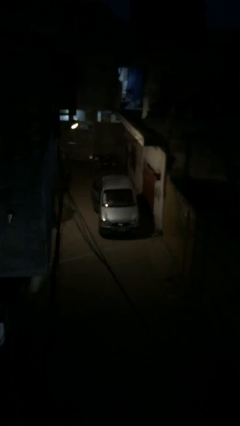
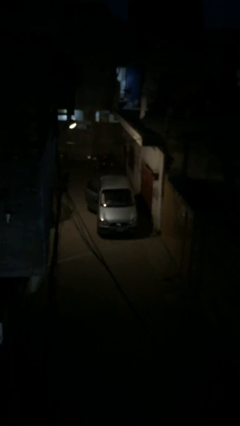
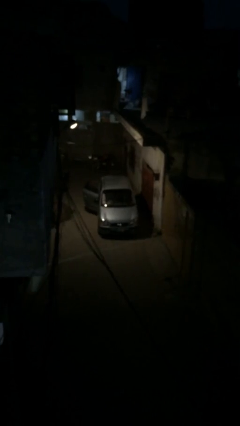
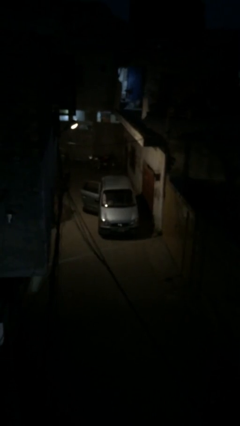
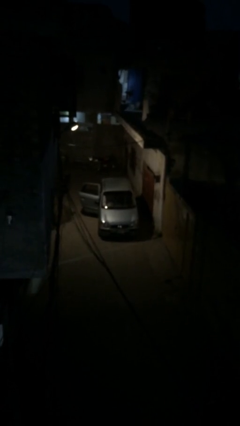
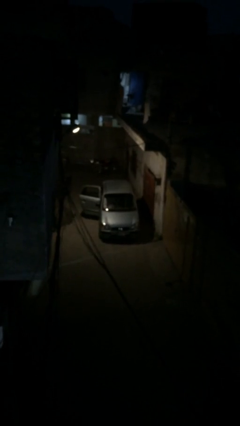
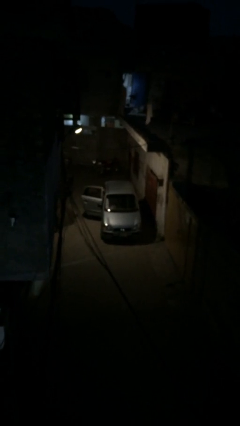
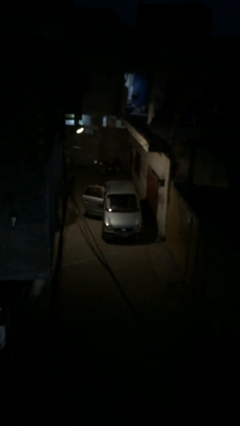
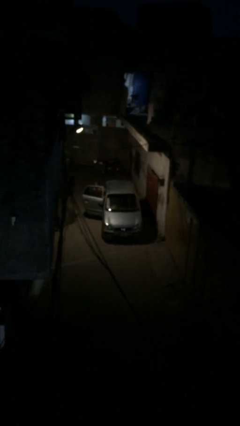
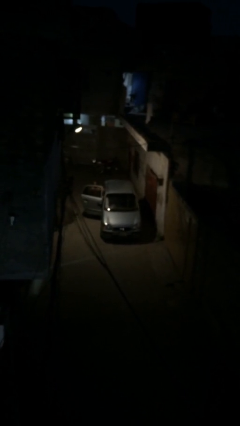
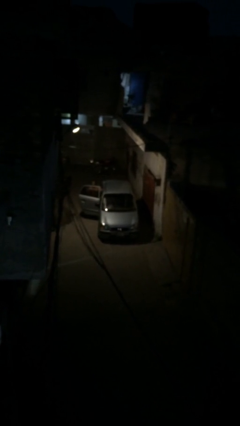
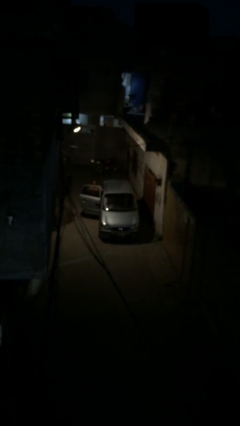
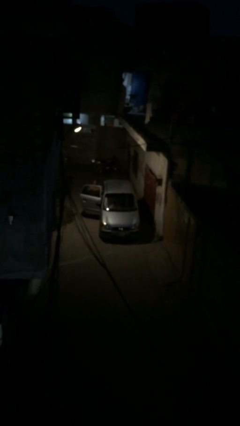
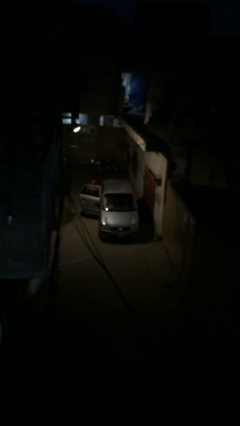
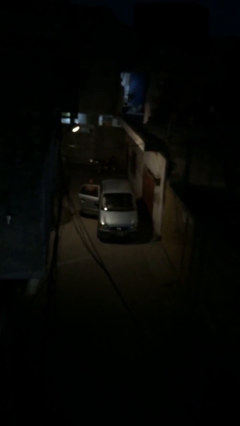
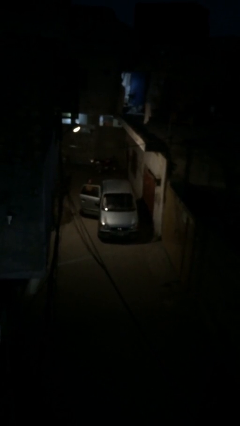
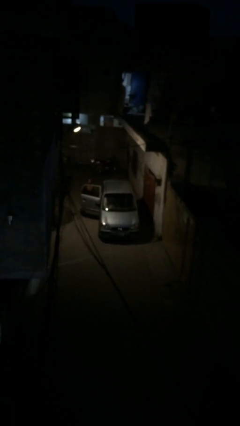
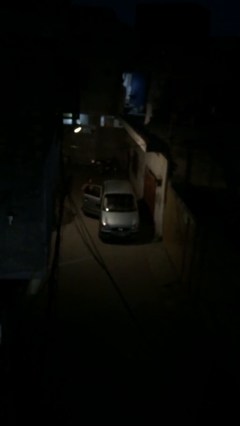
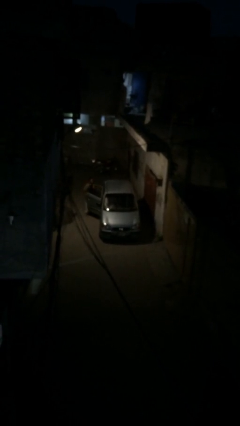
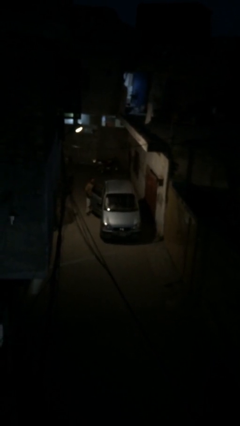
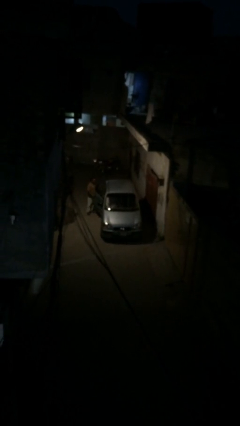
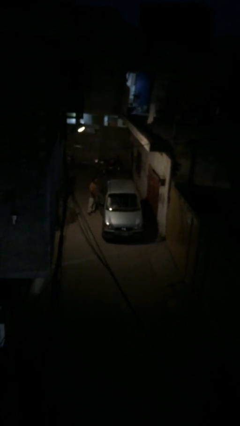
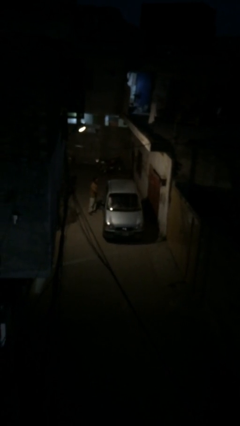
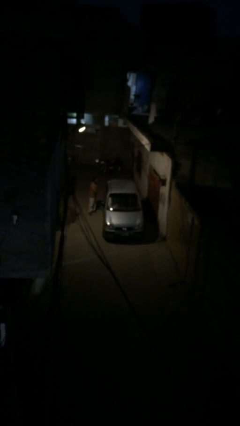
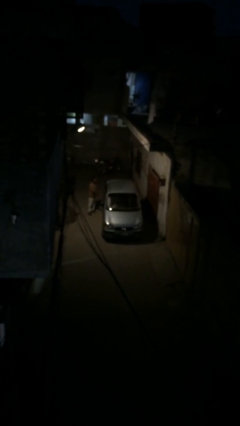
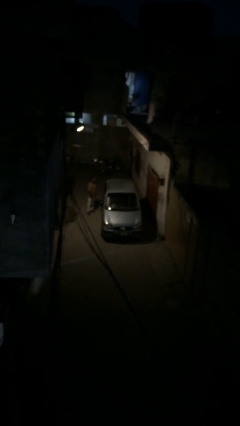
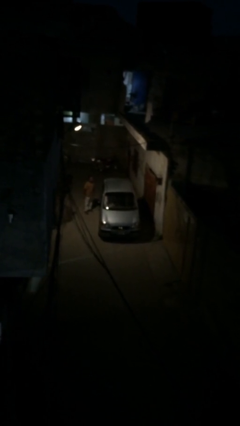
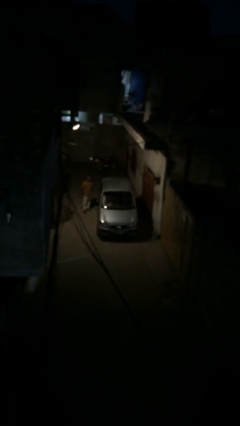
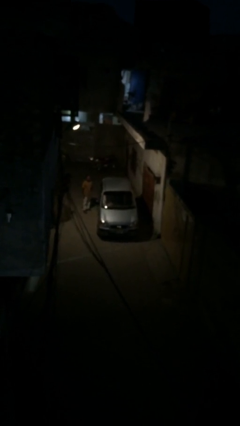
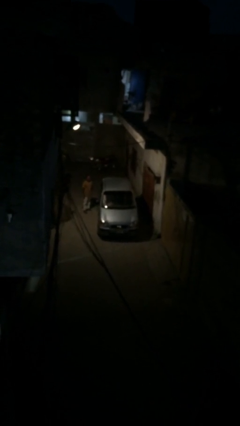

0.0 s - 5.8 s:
car drops off person

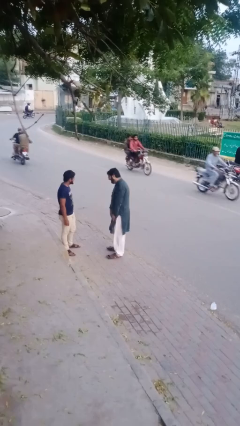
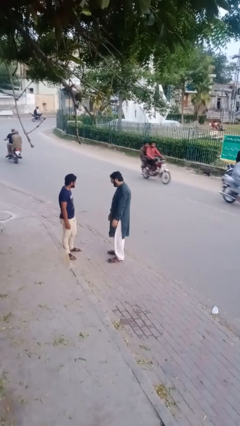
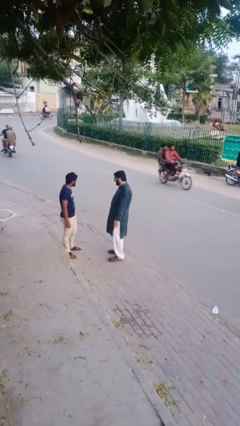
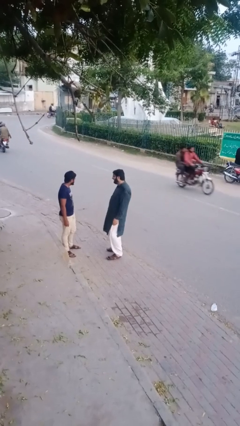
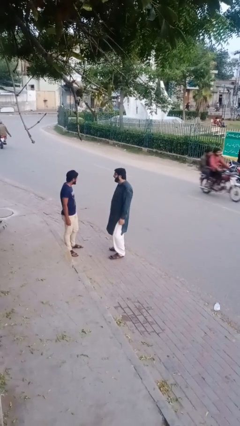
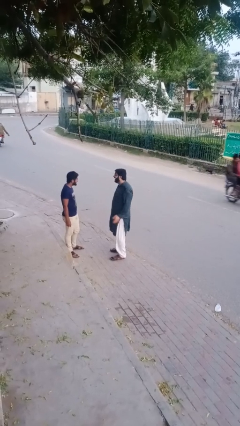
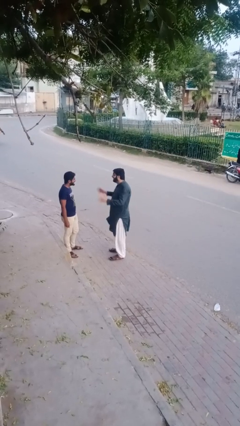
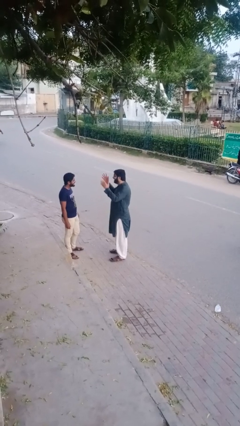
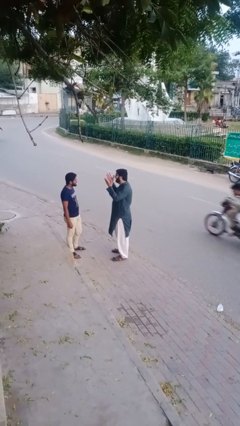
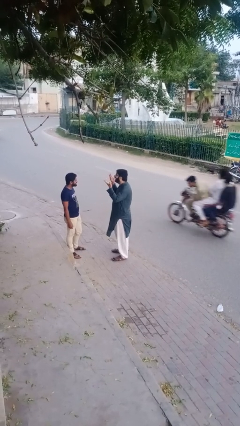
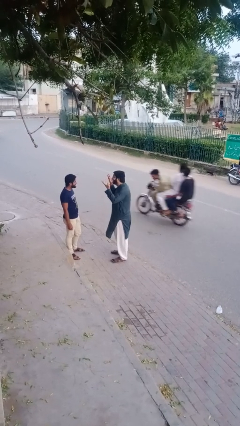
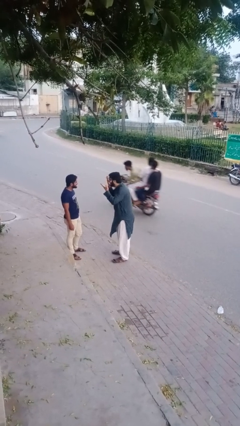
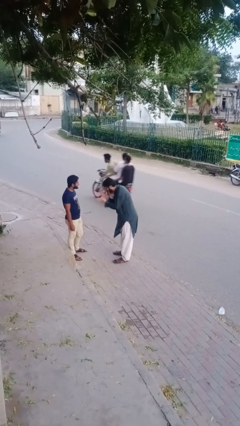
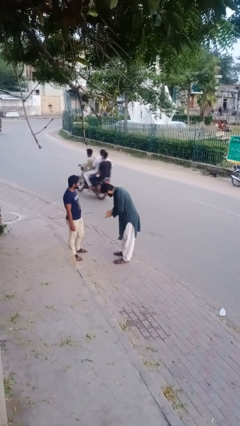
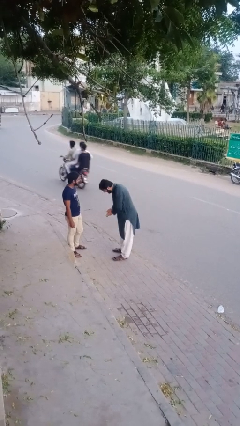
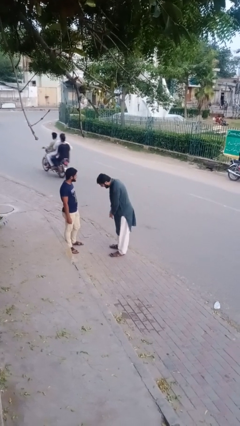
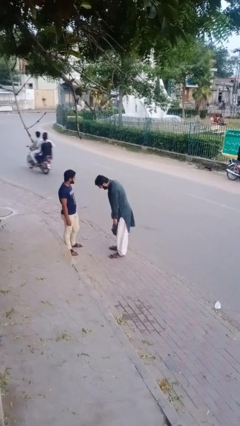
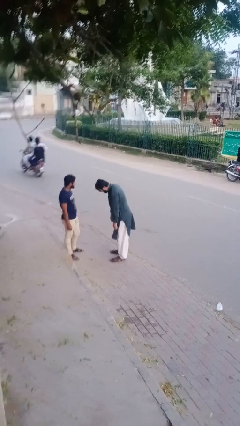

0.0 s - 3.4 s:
person laughs with person

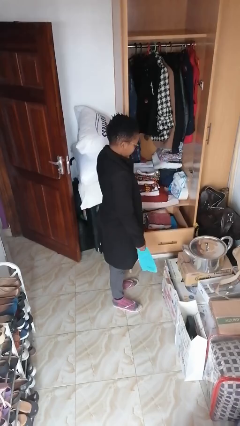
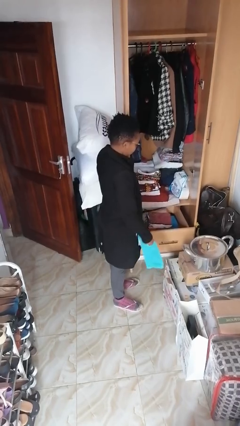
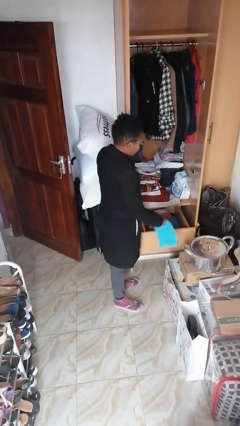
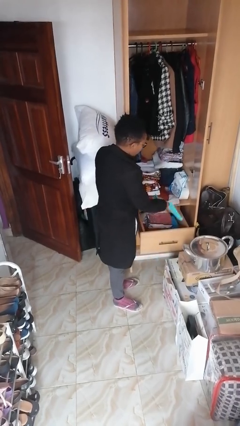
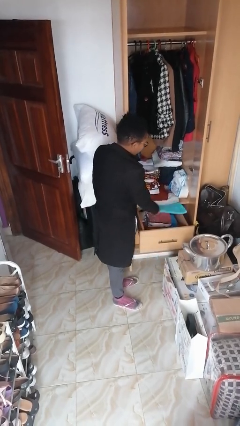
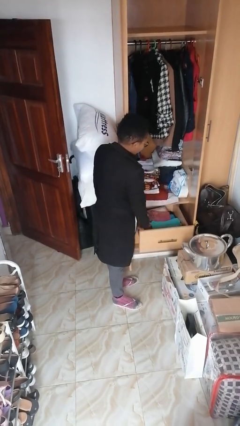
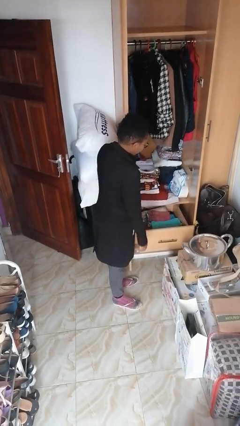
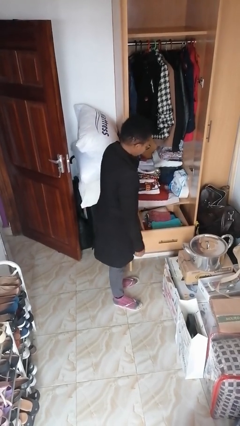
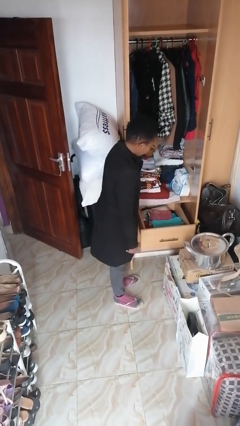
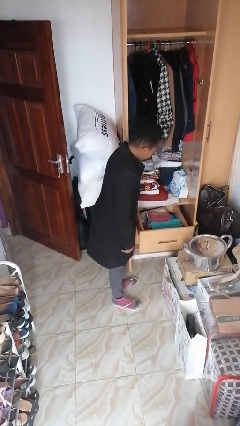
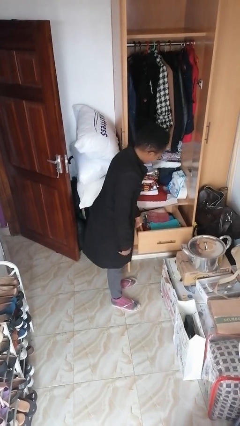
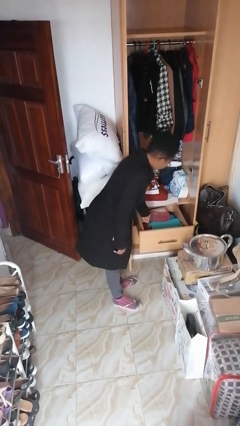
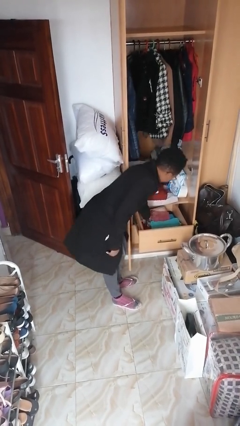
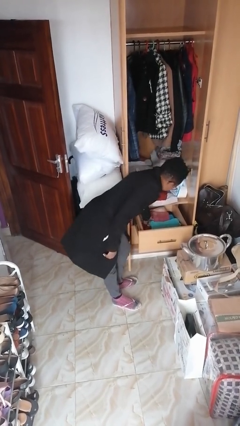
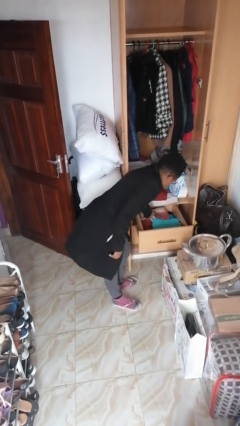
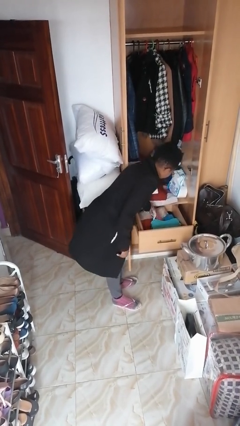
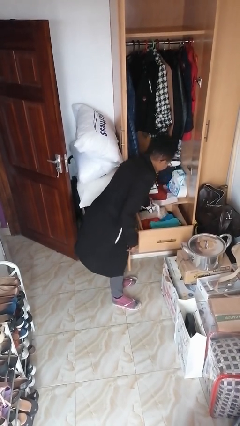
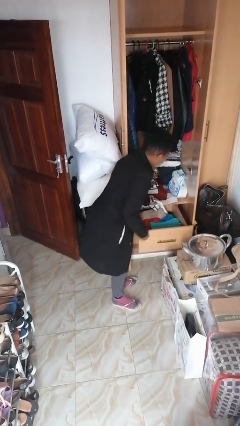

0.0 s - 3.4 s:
person pets cat

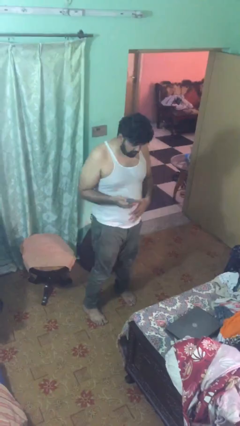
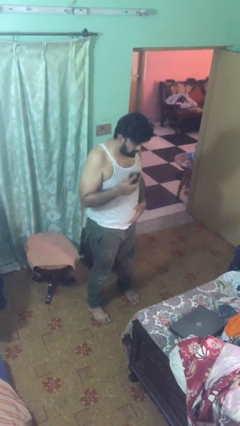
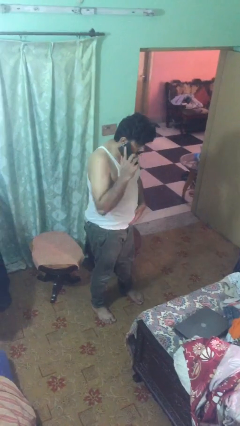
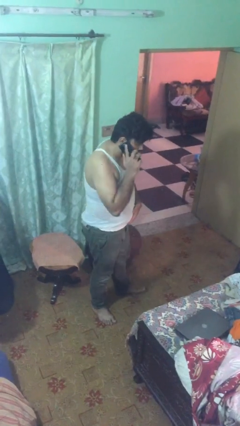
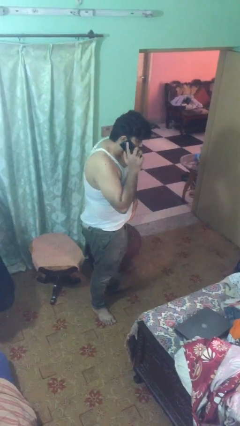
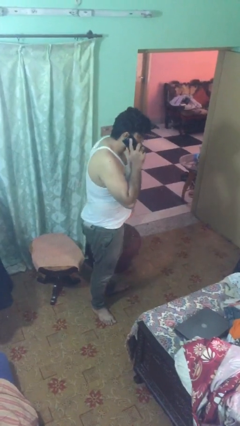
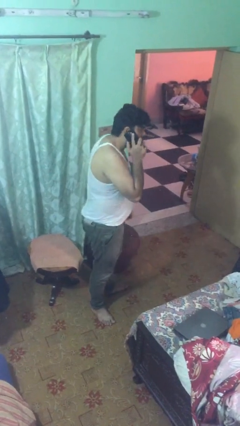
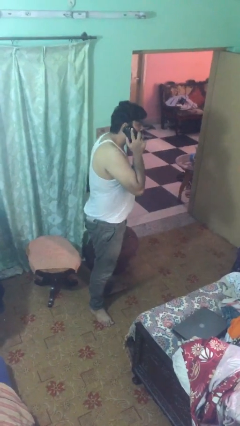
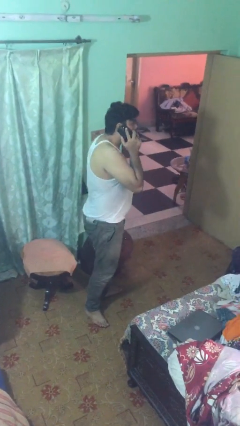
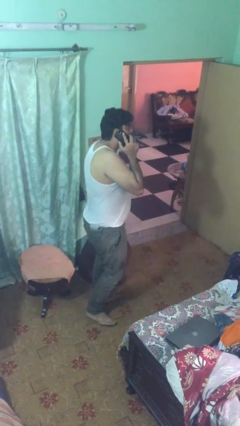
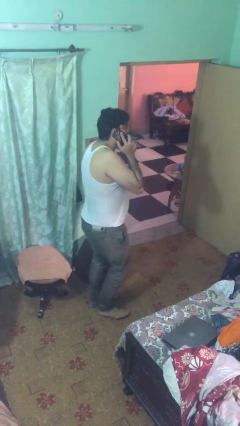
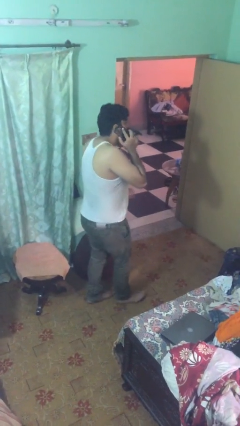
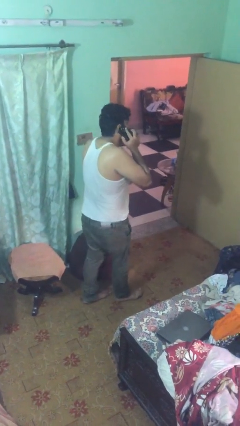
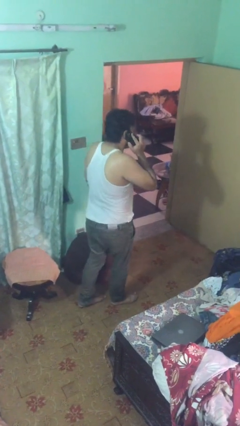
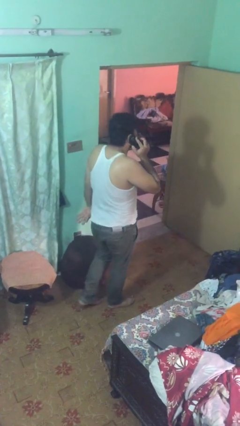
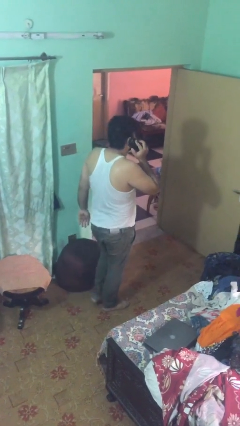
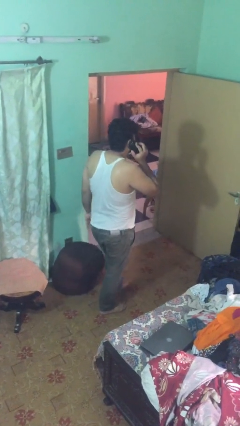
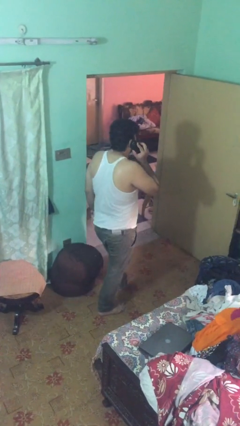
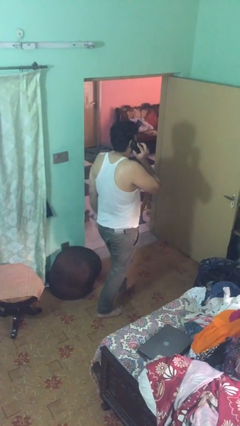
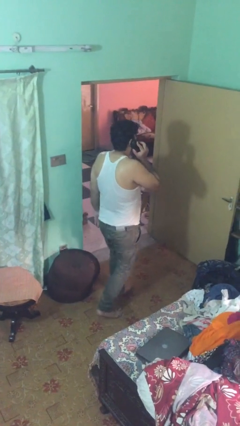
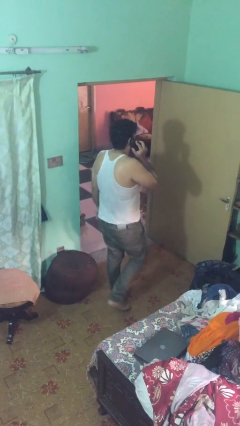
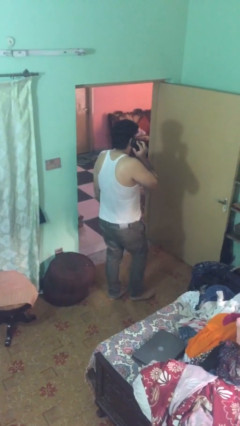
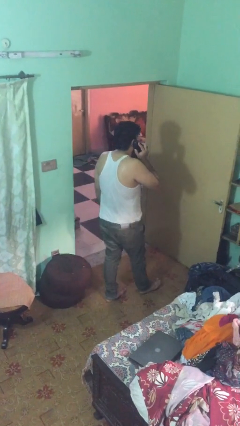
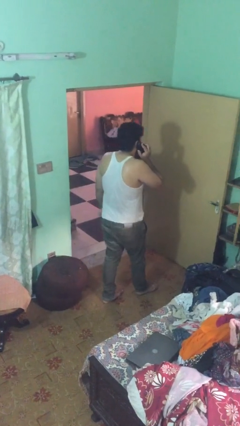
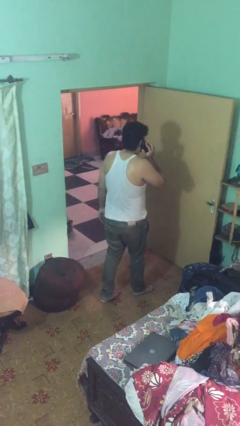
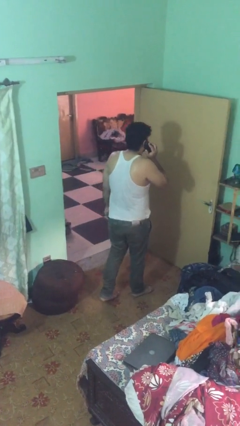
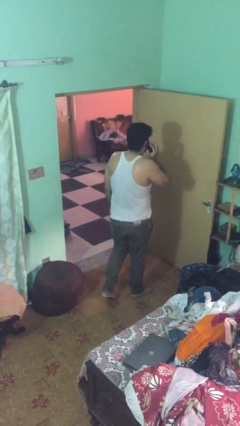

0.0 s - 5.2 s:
person talks on phone

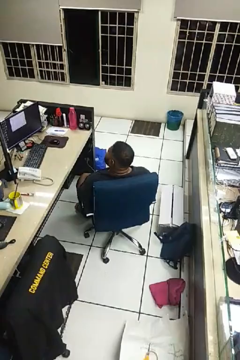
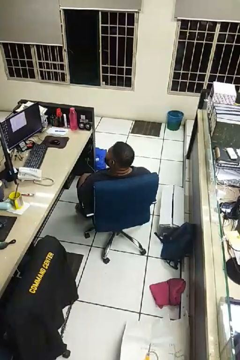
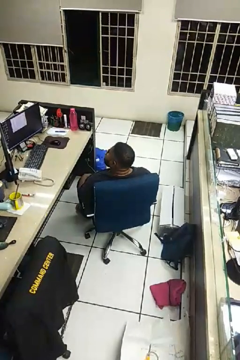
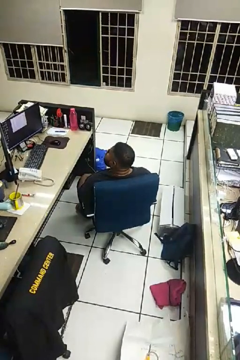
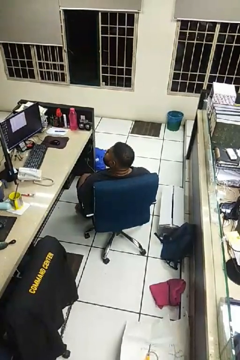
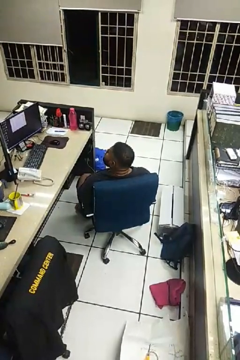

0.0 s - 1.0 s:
person sticks out tongue
